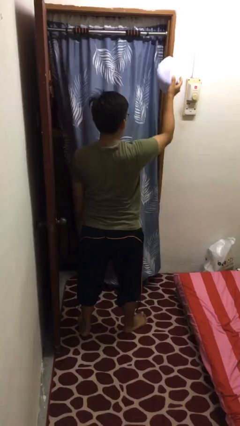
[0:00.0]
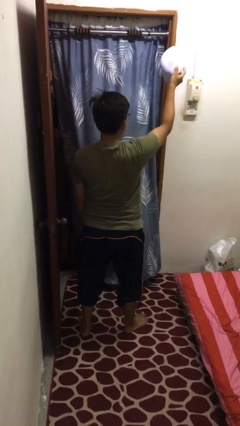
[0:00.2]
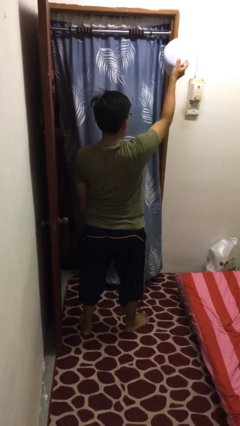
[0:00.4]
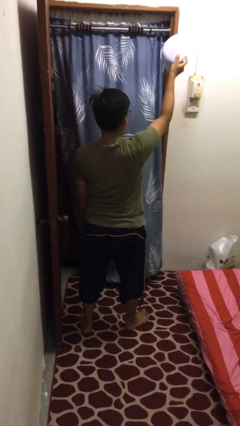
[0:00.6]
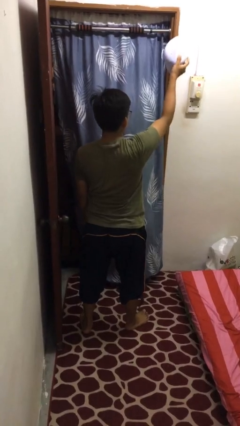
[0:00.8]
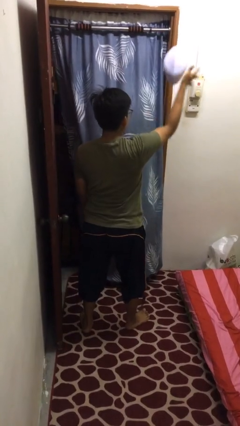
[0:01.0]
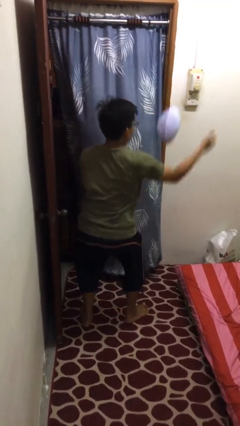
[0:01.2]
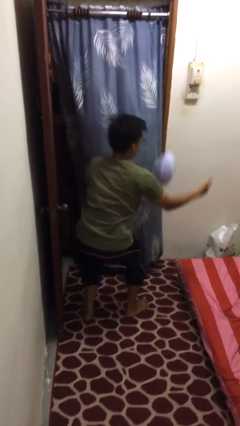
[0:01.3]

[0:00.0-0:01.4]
person drops object

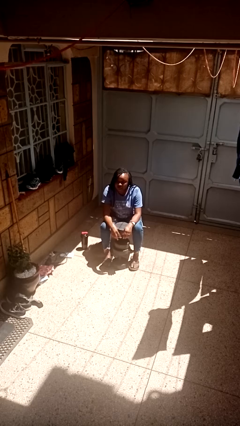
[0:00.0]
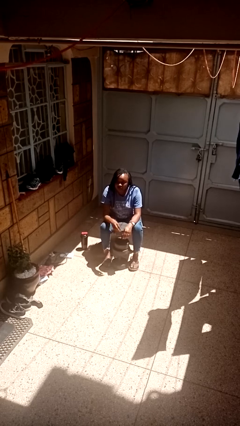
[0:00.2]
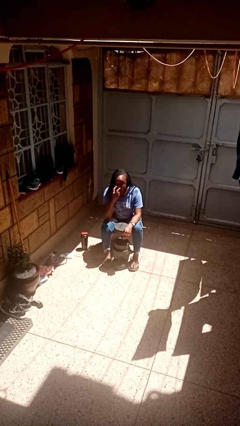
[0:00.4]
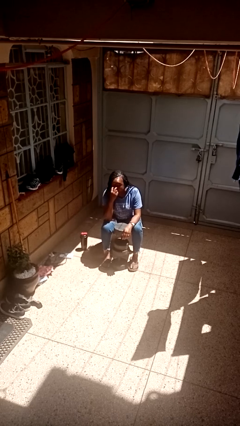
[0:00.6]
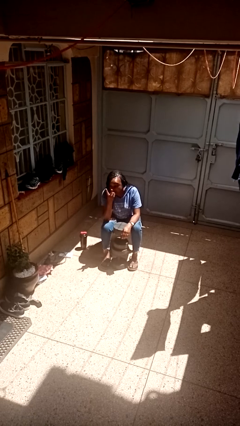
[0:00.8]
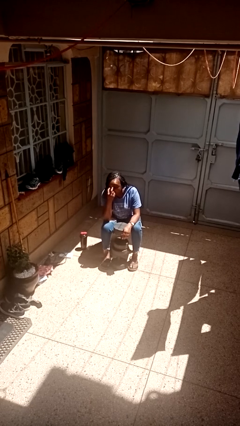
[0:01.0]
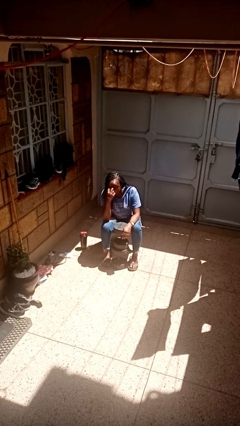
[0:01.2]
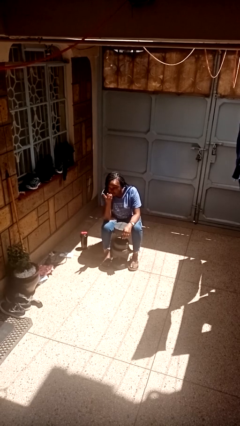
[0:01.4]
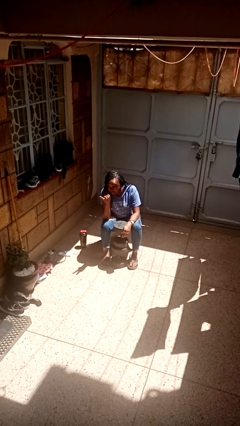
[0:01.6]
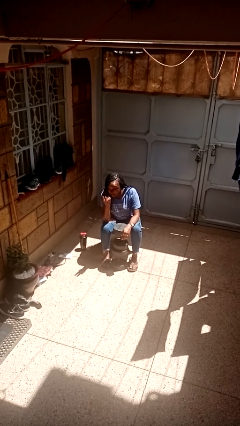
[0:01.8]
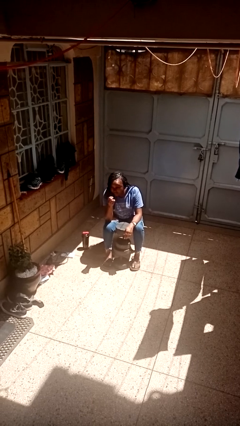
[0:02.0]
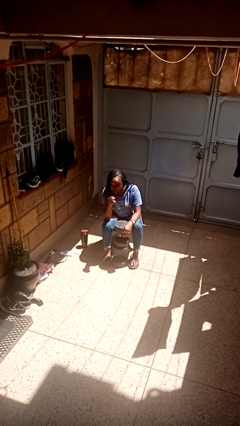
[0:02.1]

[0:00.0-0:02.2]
person gestures watch closely

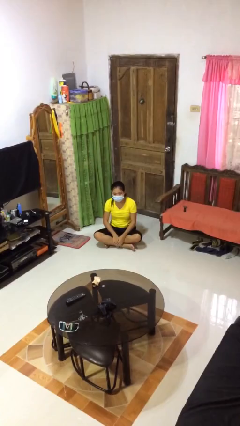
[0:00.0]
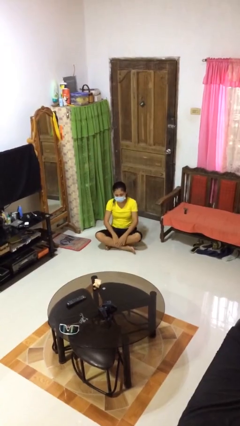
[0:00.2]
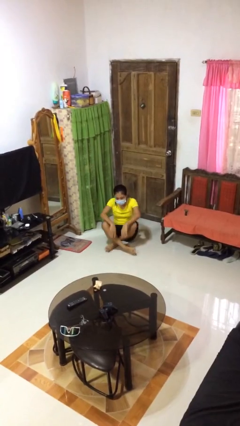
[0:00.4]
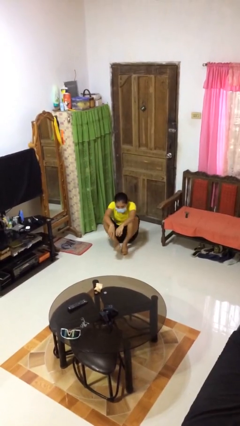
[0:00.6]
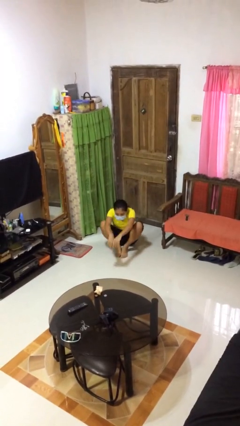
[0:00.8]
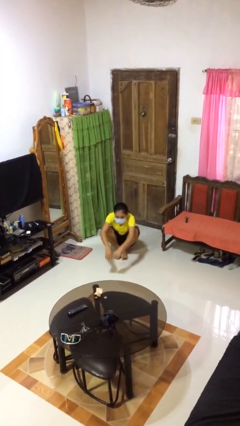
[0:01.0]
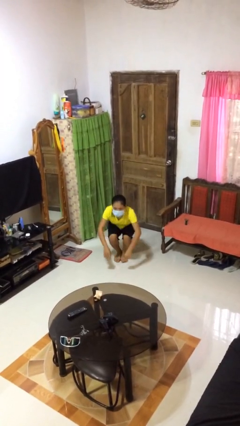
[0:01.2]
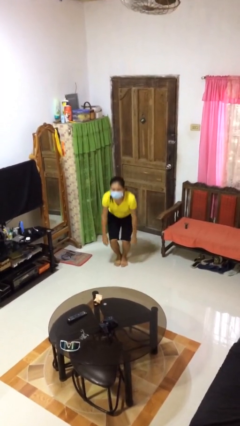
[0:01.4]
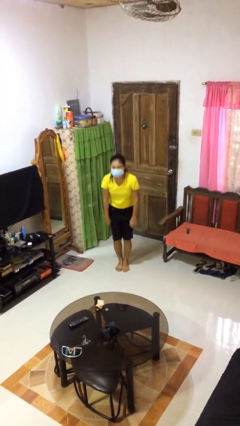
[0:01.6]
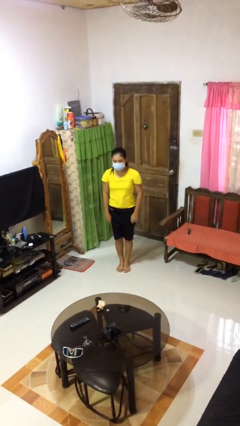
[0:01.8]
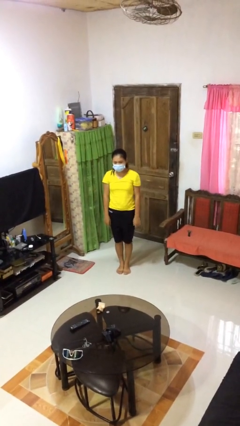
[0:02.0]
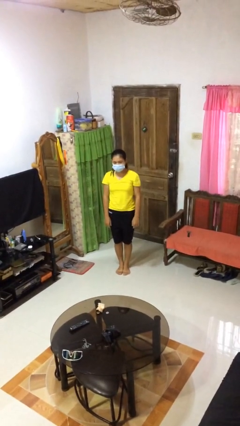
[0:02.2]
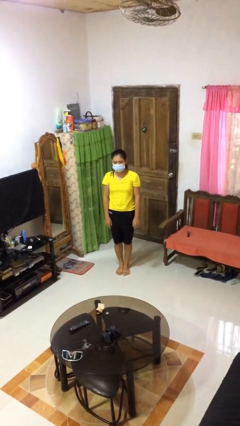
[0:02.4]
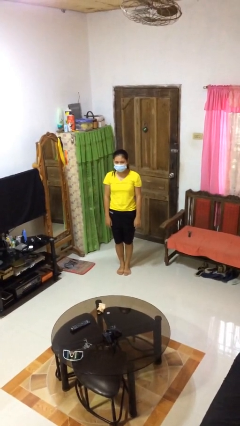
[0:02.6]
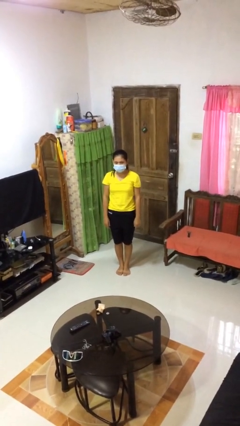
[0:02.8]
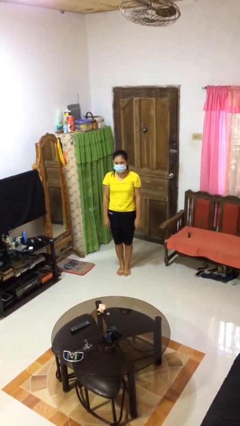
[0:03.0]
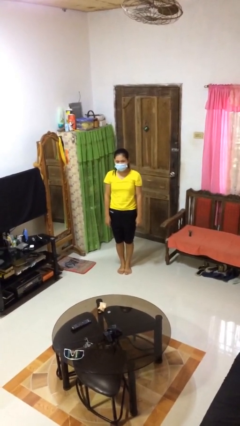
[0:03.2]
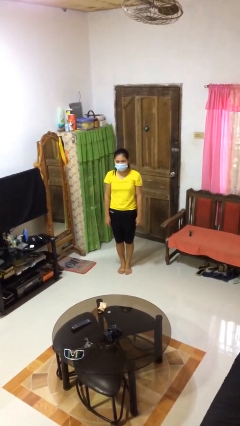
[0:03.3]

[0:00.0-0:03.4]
person stands up from floor

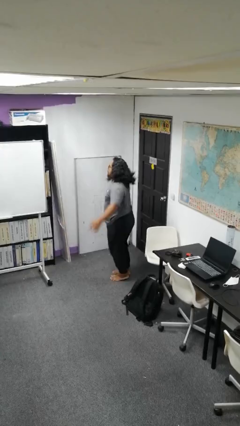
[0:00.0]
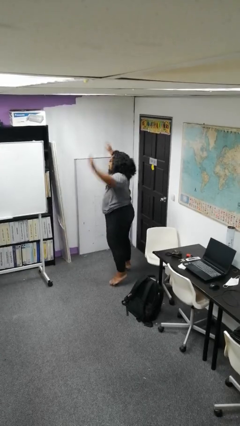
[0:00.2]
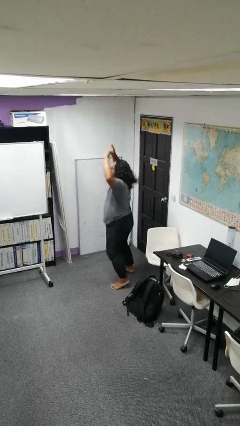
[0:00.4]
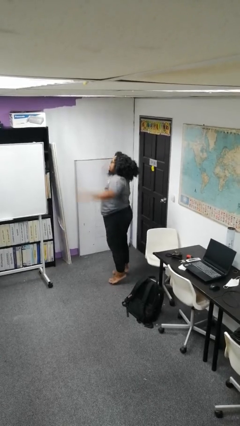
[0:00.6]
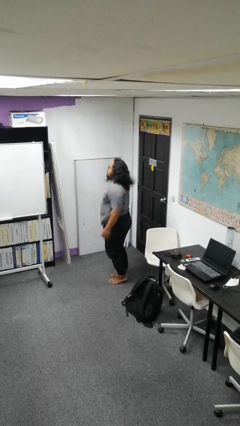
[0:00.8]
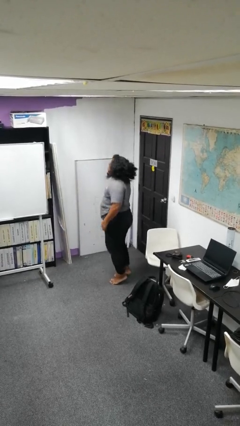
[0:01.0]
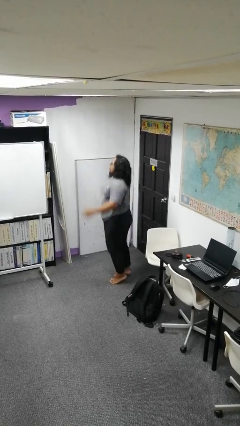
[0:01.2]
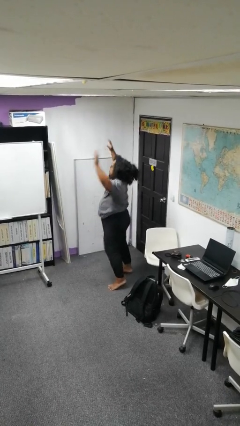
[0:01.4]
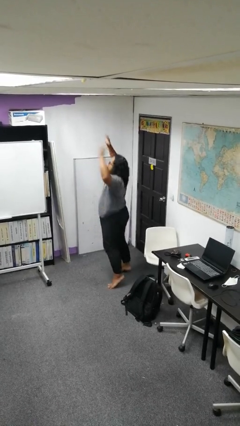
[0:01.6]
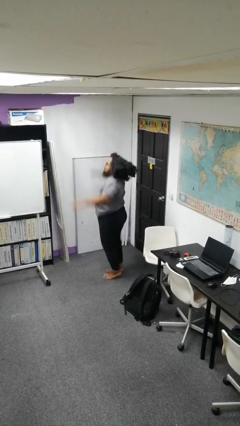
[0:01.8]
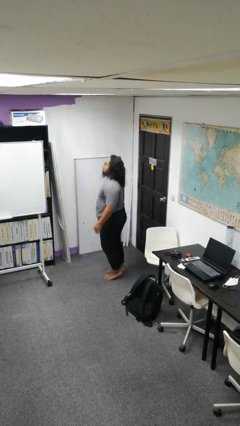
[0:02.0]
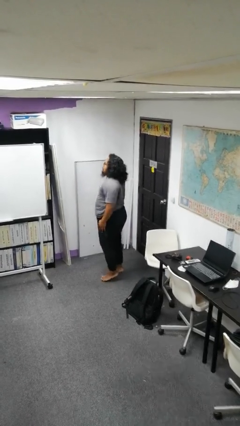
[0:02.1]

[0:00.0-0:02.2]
person exercises with jumping jacks

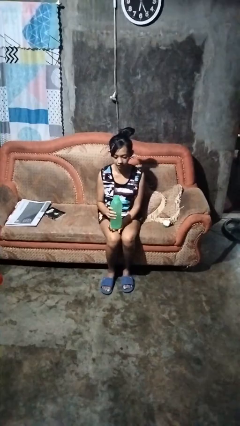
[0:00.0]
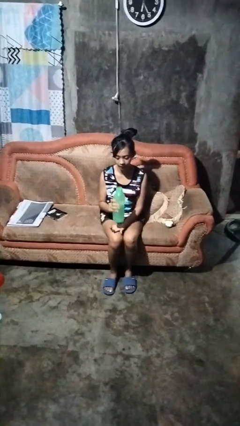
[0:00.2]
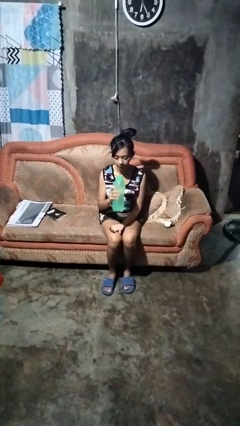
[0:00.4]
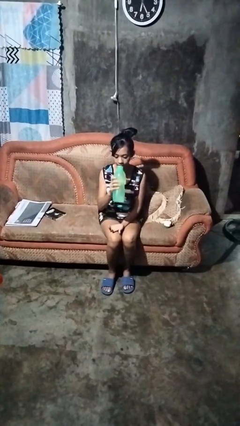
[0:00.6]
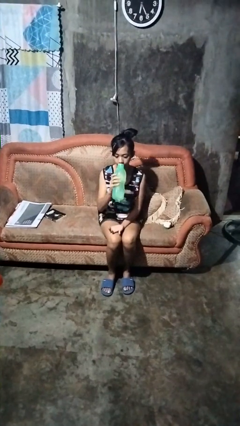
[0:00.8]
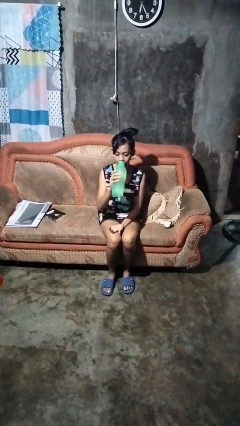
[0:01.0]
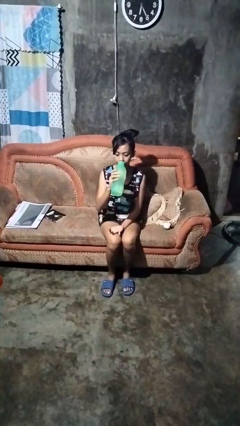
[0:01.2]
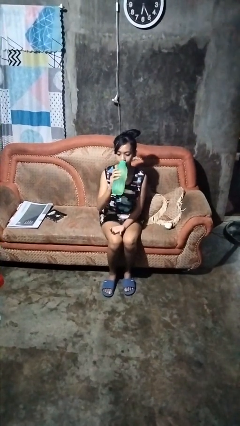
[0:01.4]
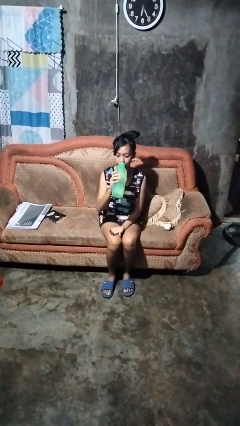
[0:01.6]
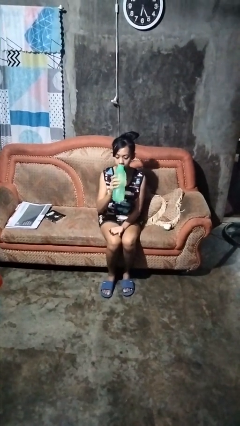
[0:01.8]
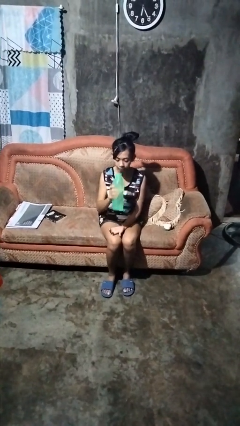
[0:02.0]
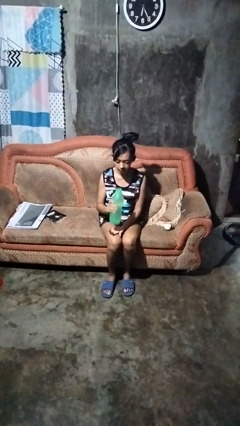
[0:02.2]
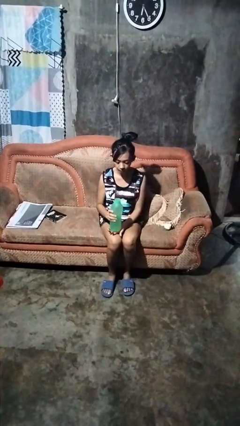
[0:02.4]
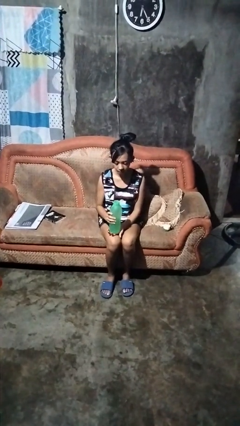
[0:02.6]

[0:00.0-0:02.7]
person drinks from bottle

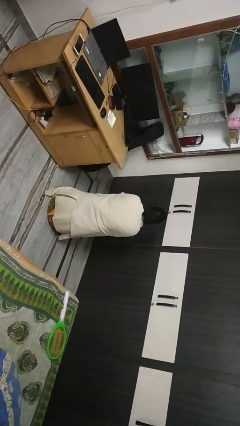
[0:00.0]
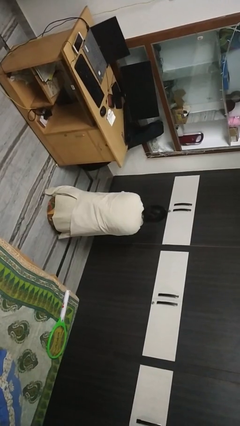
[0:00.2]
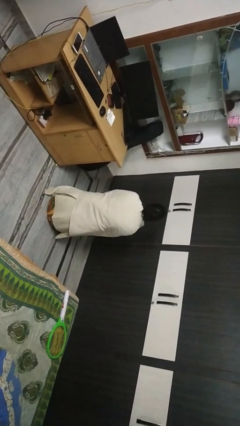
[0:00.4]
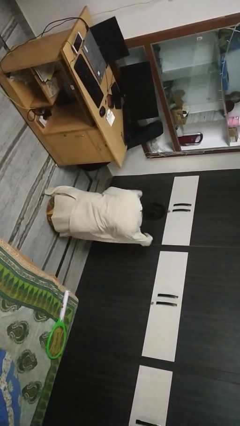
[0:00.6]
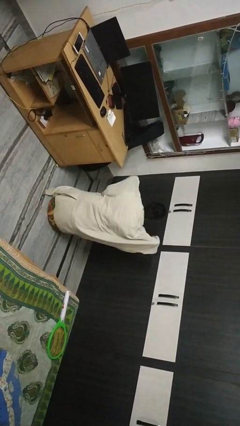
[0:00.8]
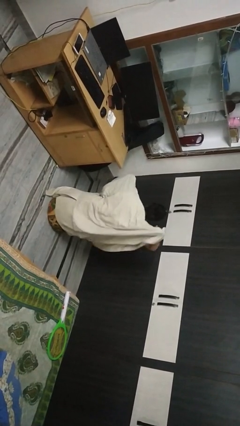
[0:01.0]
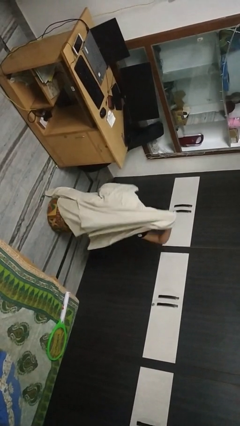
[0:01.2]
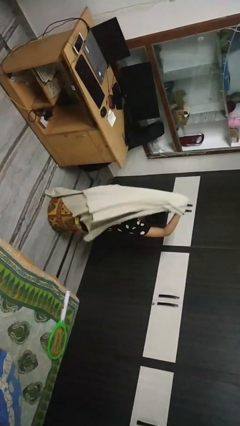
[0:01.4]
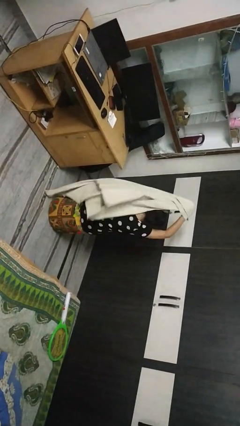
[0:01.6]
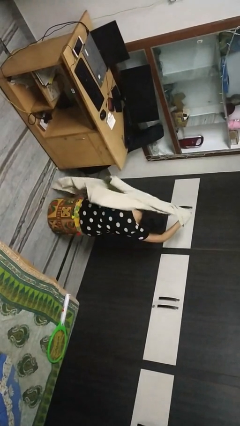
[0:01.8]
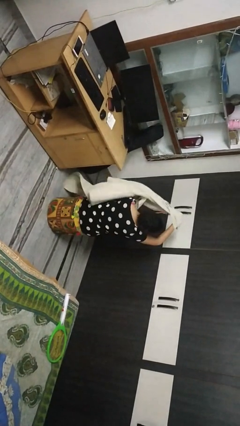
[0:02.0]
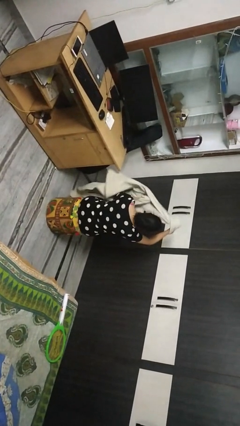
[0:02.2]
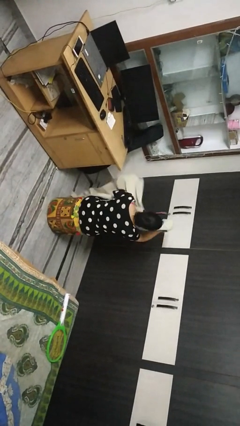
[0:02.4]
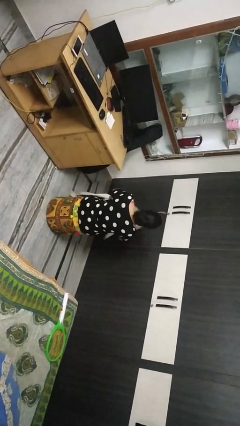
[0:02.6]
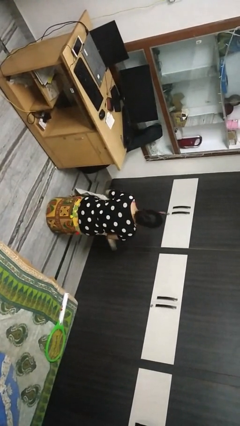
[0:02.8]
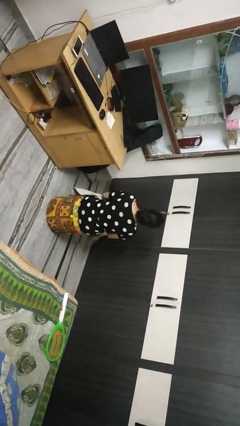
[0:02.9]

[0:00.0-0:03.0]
person uncovers with blanket

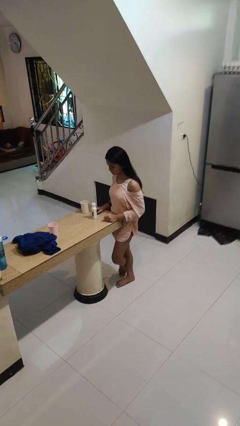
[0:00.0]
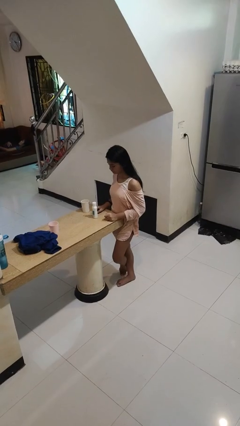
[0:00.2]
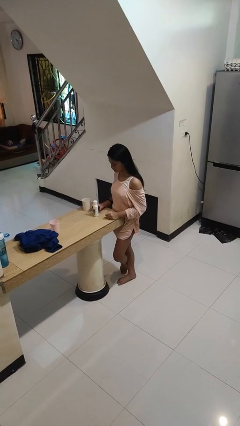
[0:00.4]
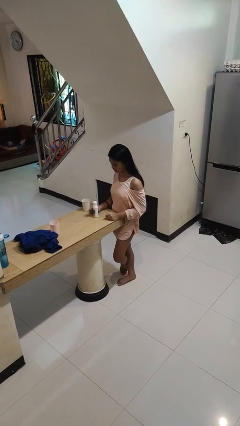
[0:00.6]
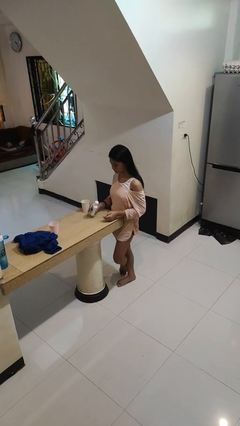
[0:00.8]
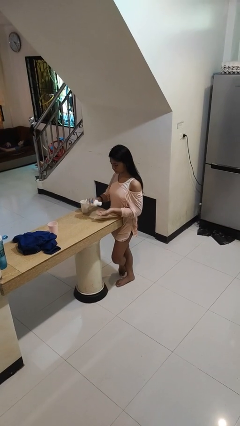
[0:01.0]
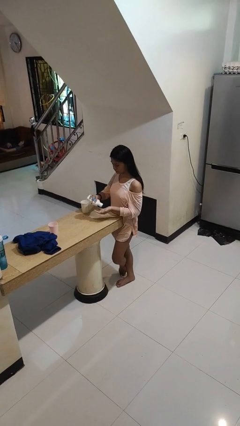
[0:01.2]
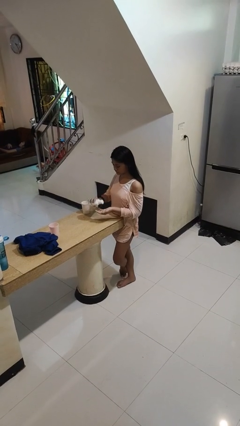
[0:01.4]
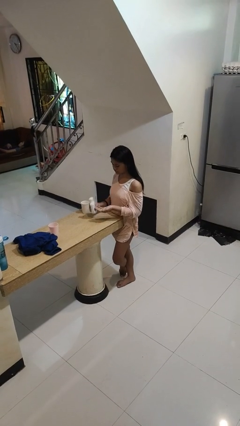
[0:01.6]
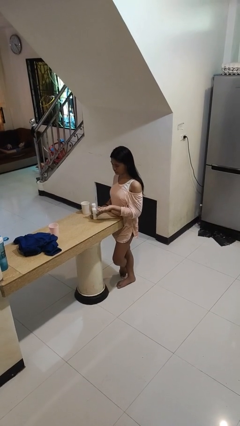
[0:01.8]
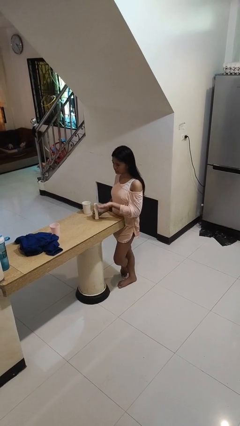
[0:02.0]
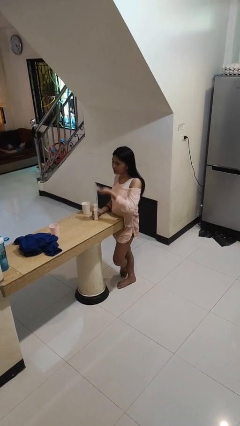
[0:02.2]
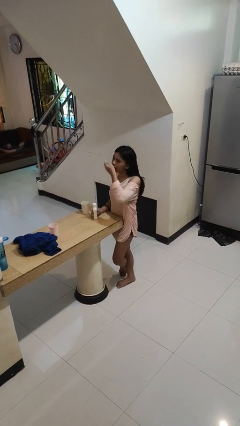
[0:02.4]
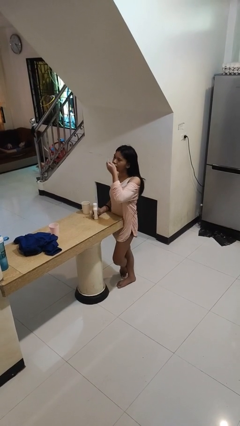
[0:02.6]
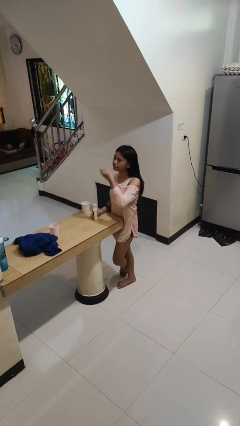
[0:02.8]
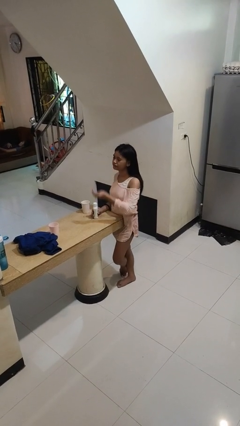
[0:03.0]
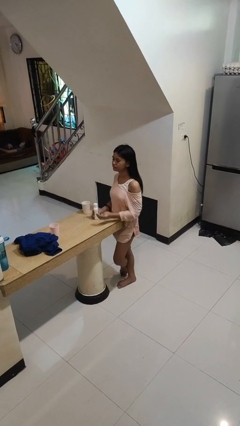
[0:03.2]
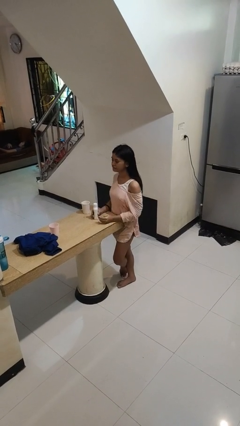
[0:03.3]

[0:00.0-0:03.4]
person takes medicine pills
